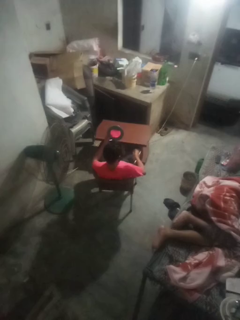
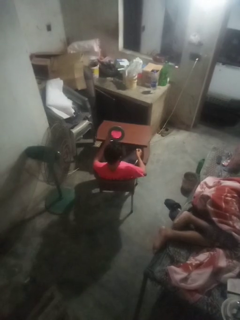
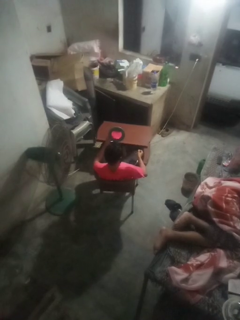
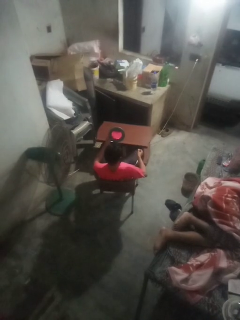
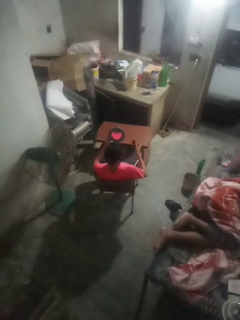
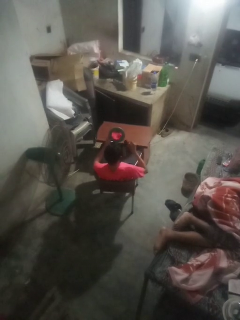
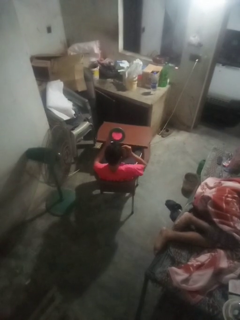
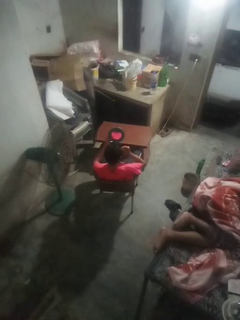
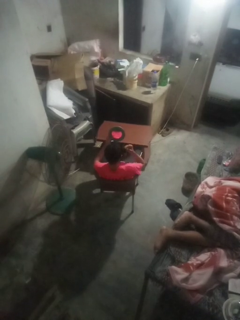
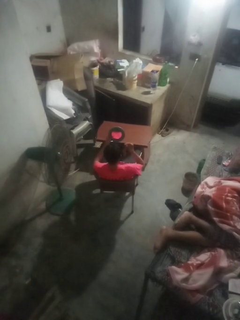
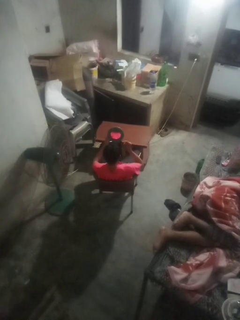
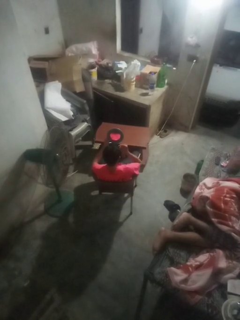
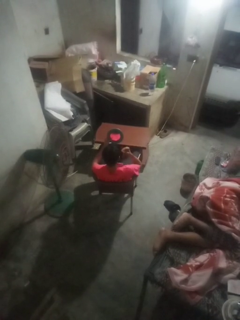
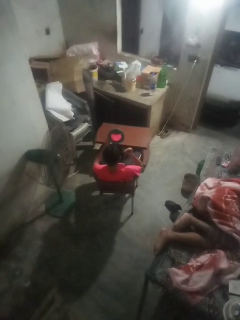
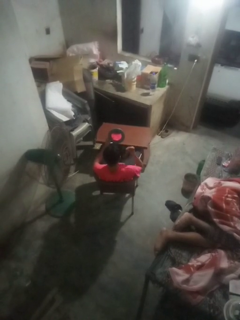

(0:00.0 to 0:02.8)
person applies eye makeup

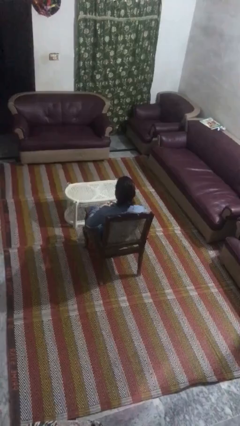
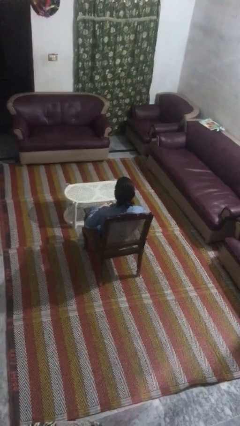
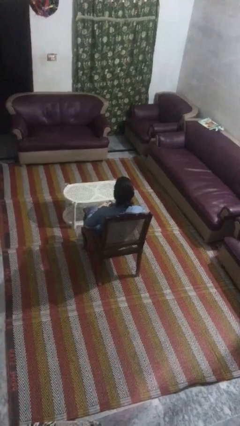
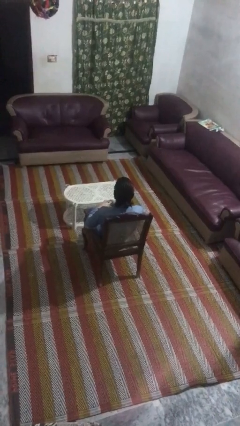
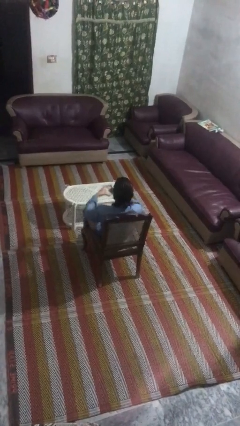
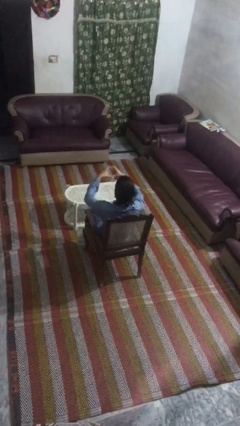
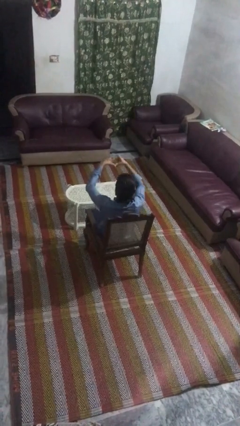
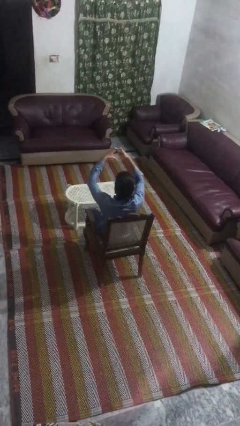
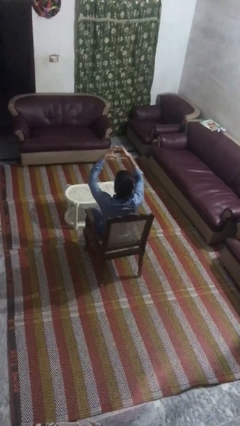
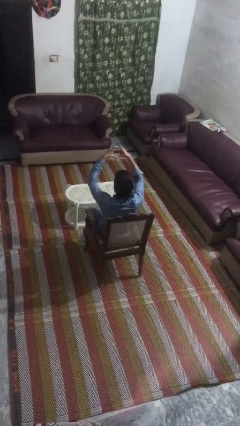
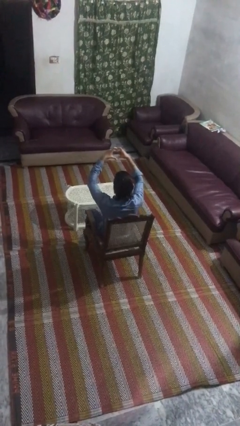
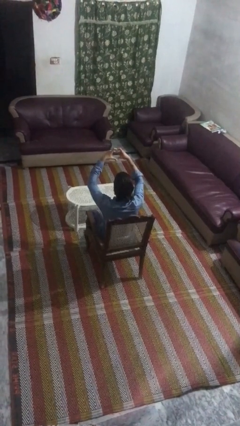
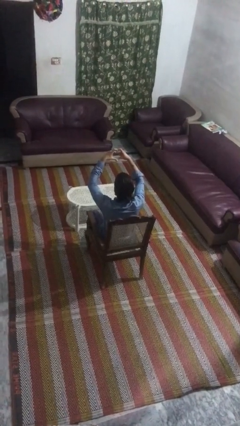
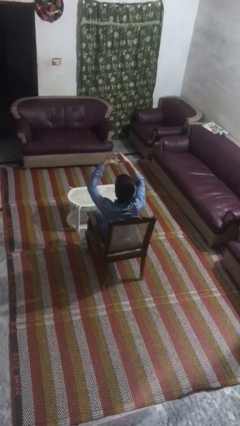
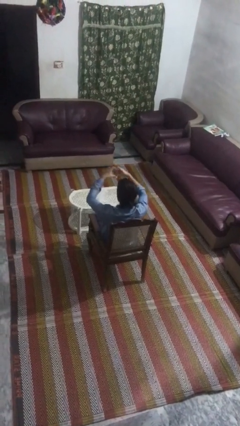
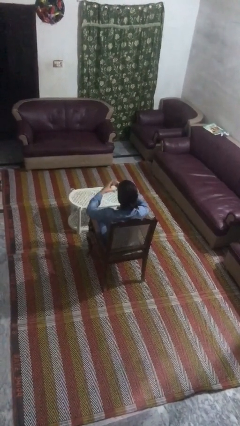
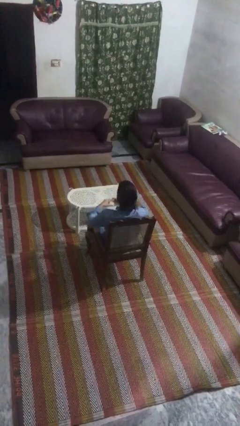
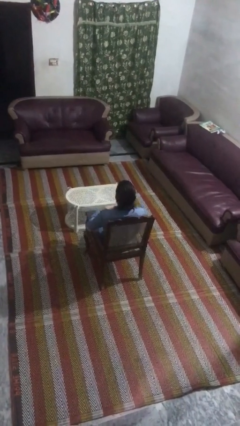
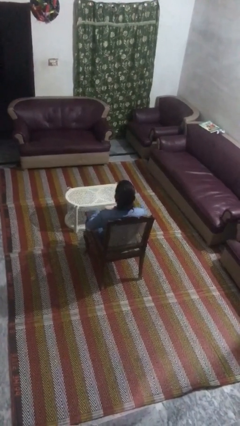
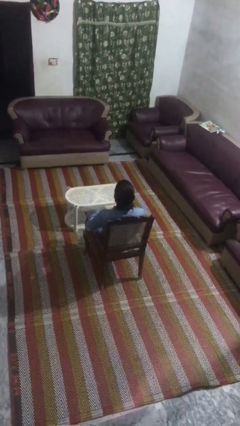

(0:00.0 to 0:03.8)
person gestures heart

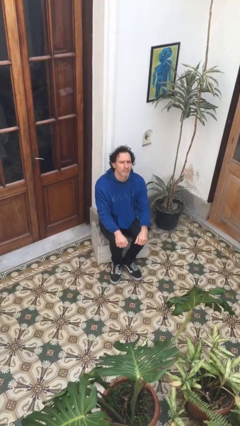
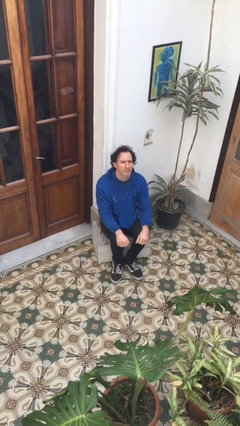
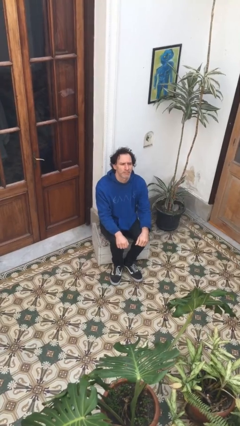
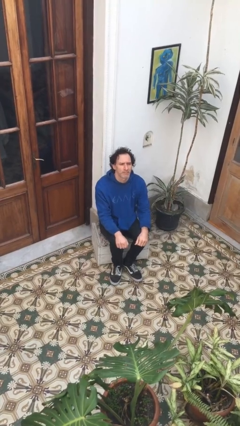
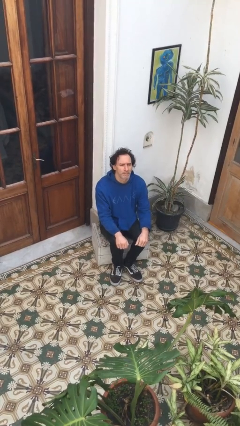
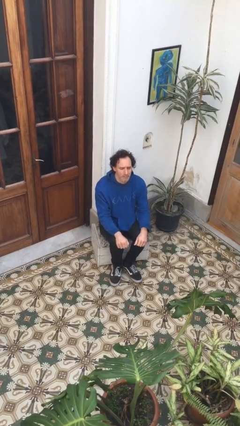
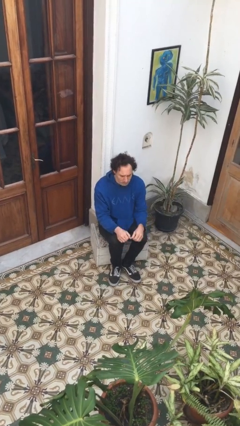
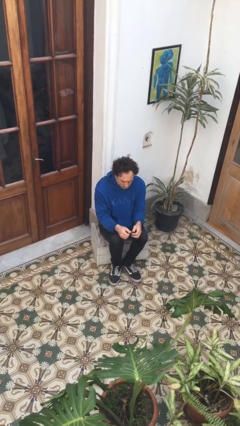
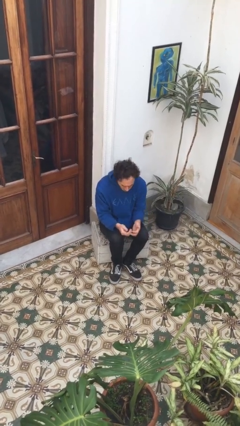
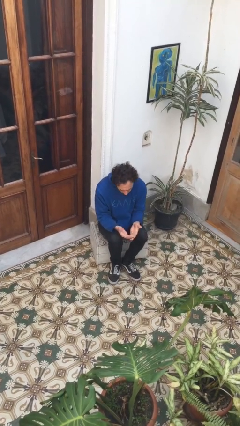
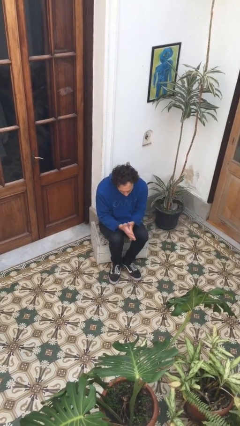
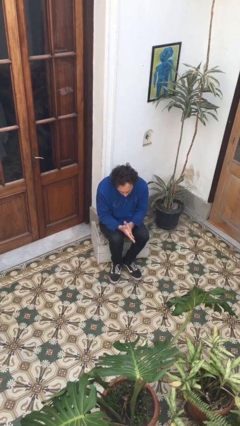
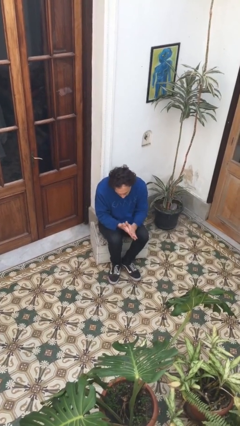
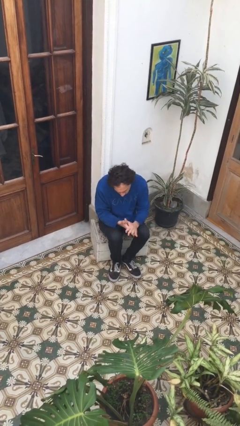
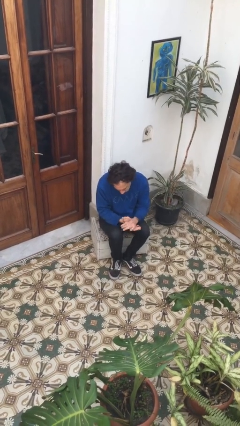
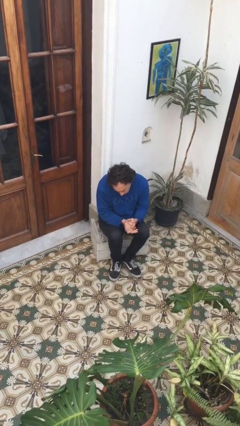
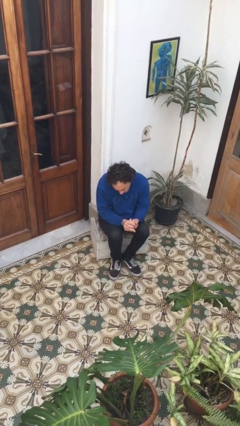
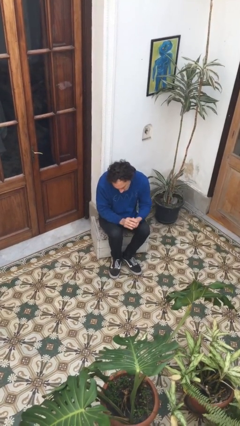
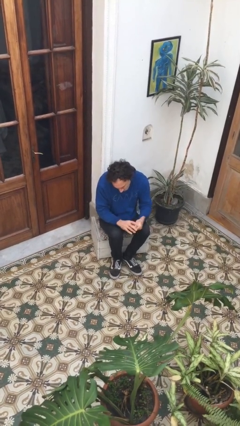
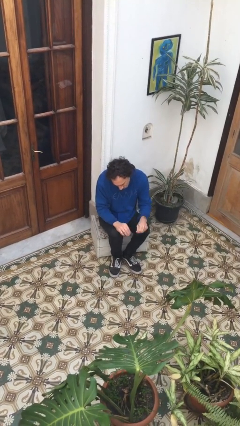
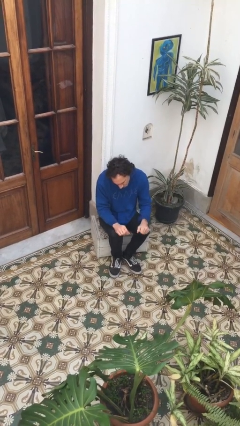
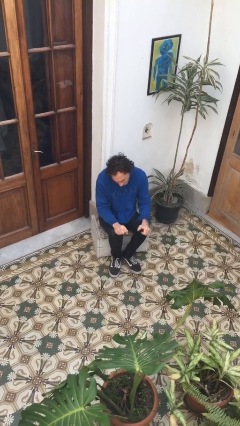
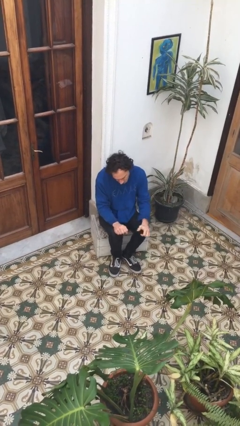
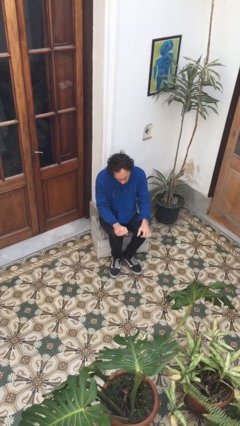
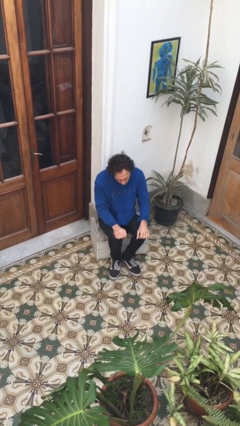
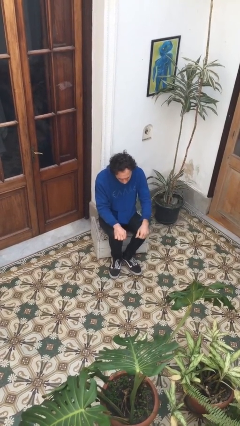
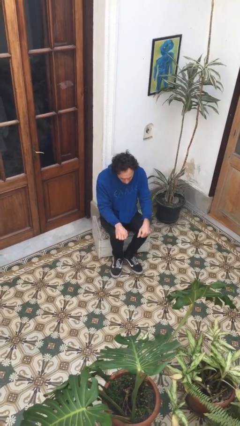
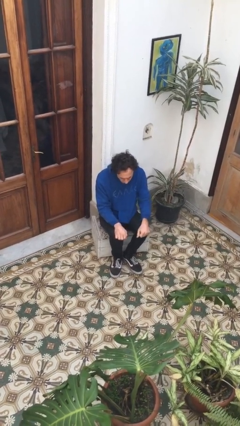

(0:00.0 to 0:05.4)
person looks at hands in lap

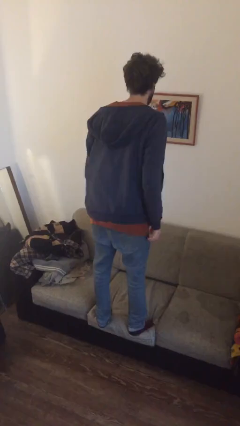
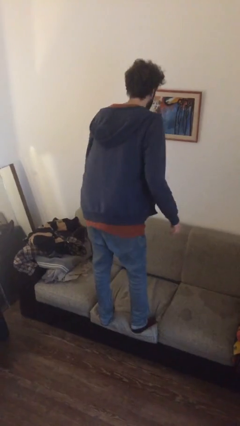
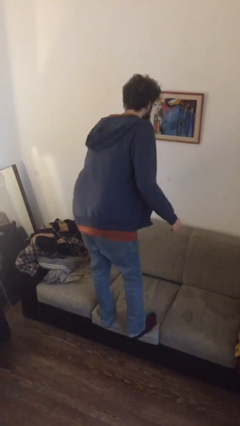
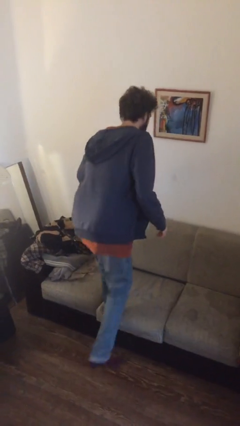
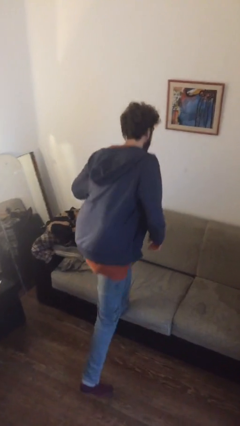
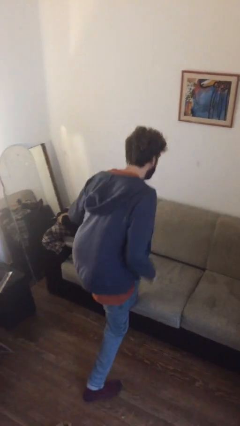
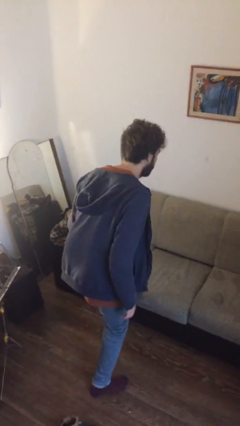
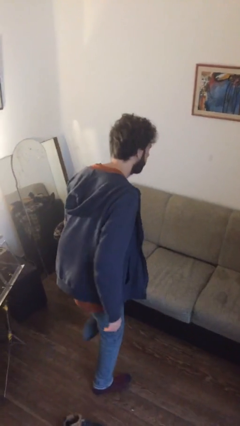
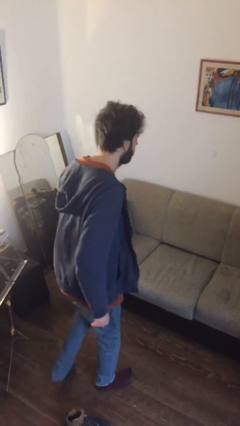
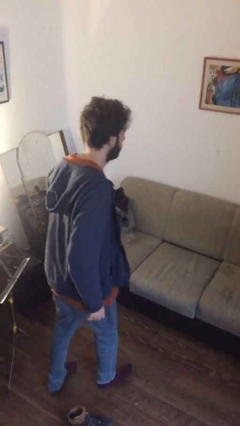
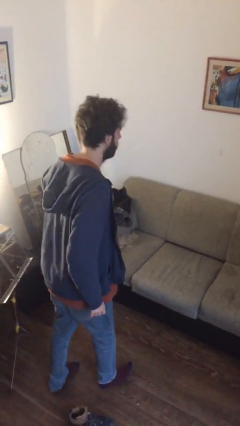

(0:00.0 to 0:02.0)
person climbs off couch

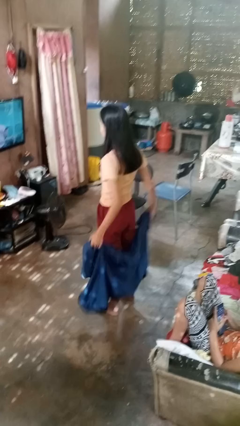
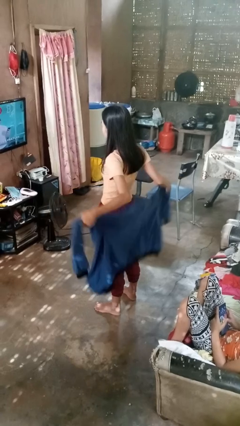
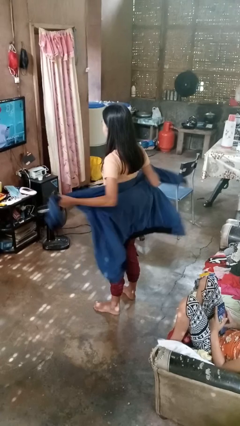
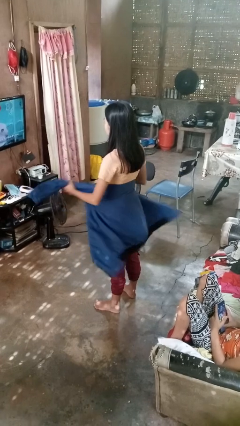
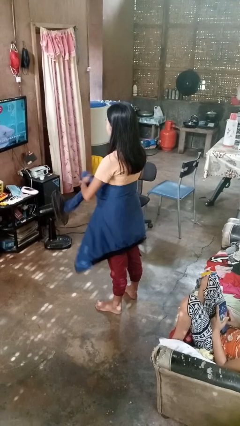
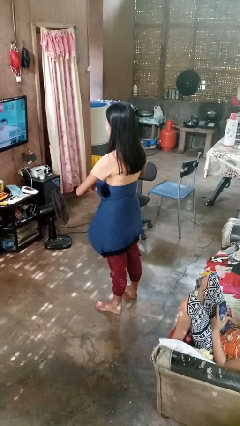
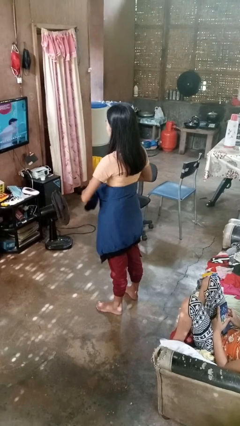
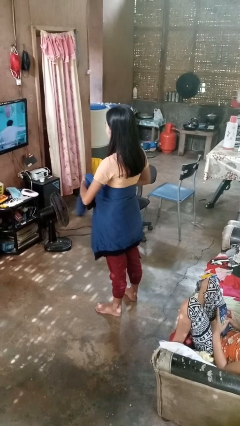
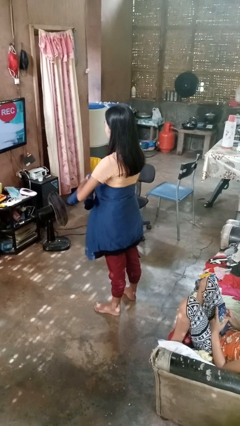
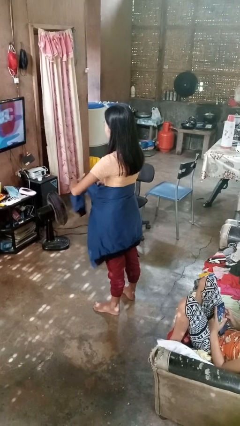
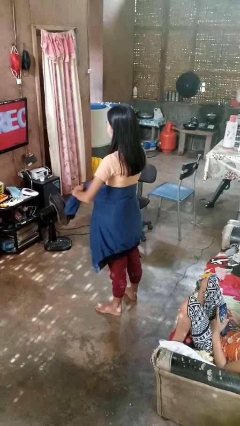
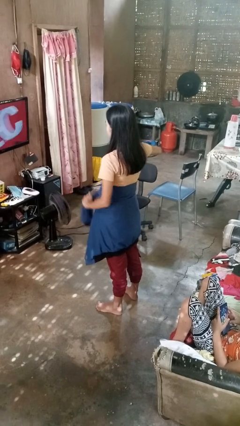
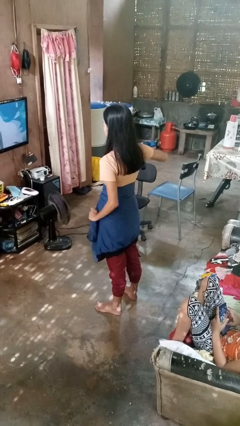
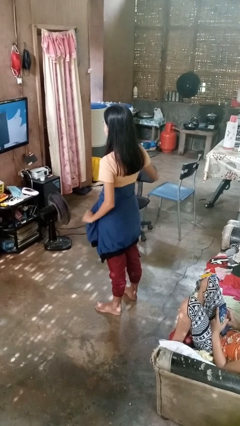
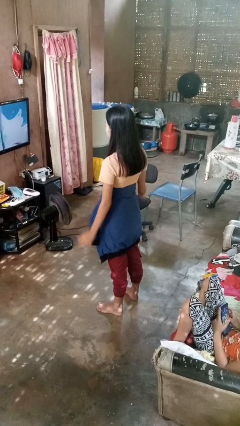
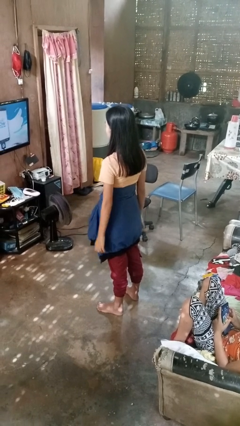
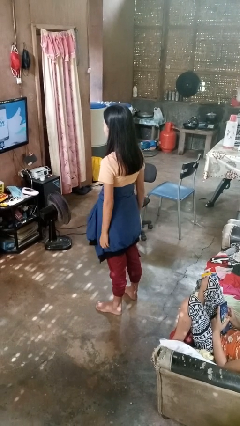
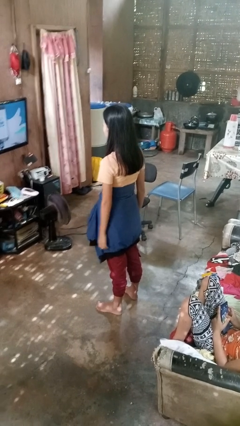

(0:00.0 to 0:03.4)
person ties jacket around waist

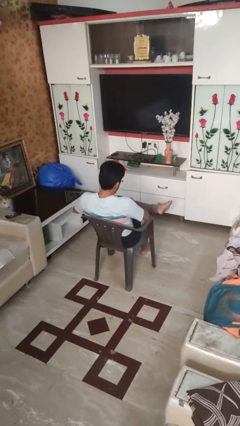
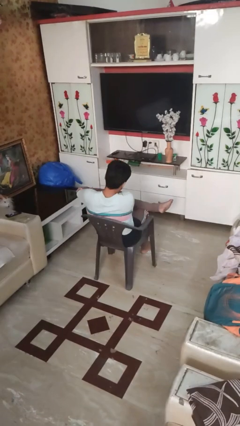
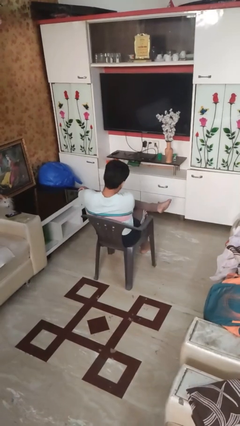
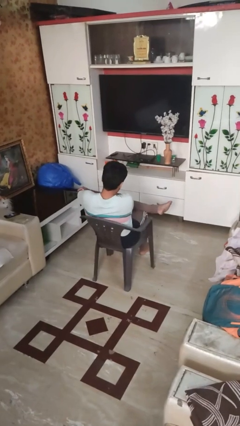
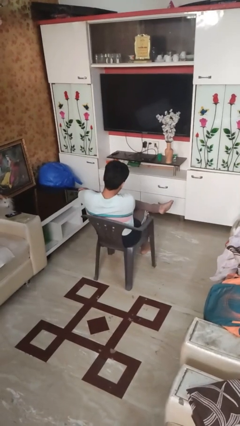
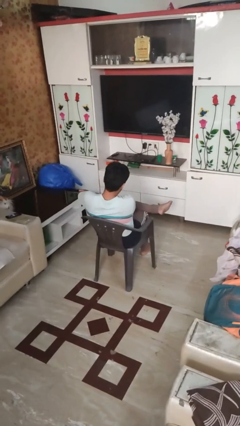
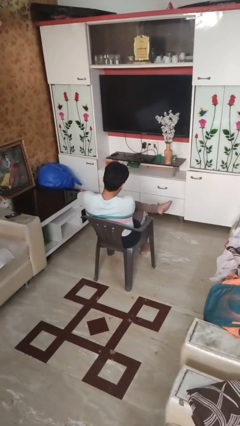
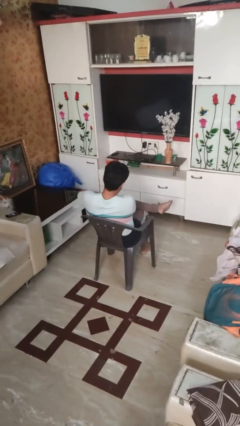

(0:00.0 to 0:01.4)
person swats bug
